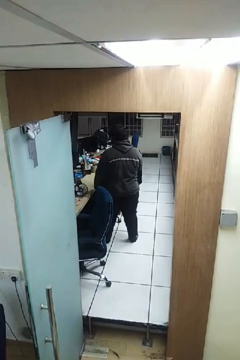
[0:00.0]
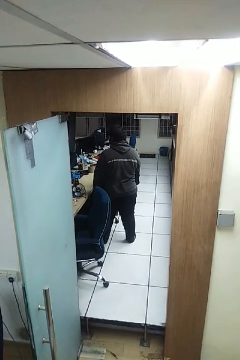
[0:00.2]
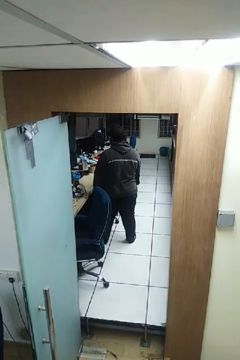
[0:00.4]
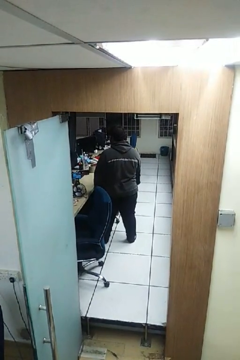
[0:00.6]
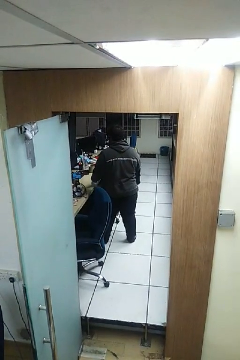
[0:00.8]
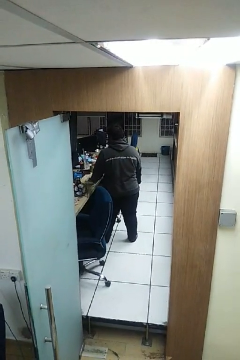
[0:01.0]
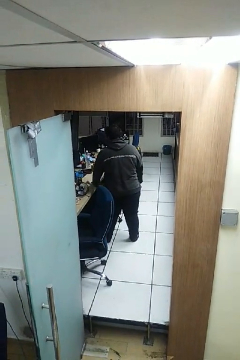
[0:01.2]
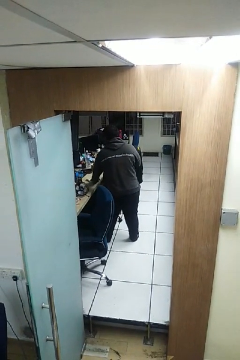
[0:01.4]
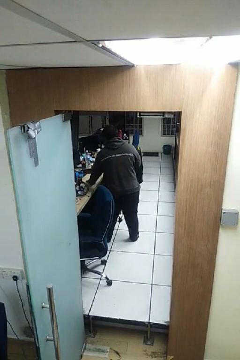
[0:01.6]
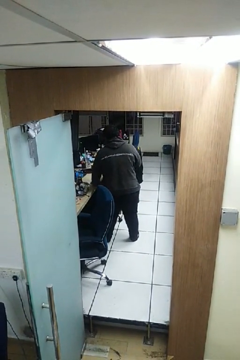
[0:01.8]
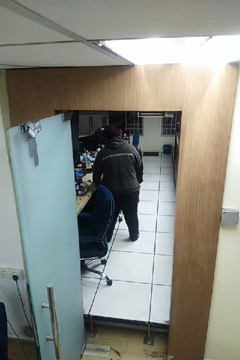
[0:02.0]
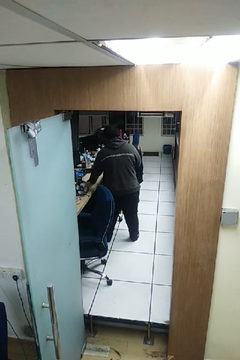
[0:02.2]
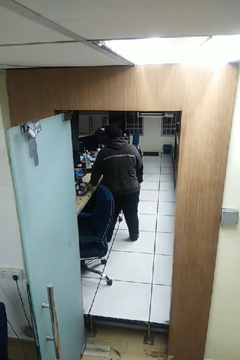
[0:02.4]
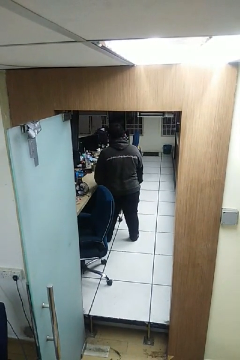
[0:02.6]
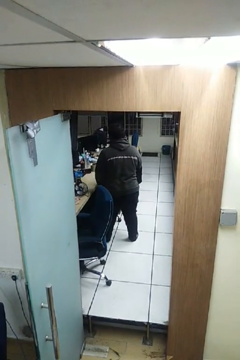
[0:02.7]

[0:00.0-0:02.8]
person cleans table with rag

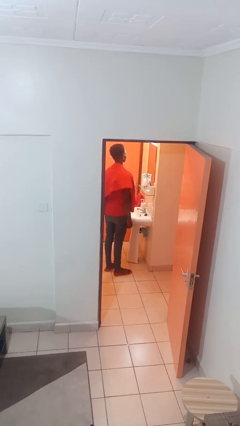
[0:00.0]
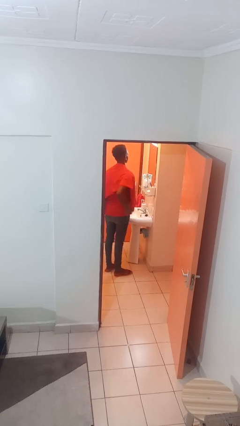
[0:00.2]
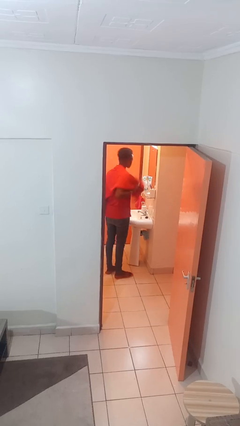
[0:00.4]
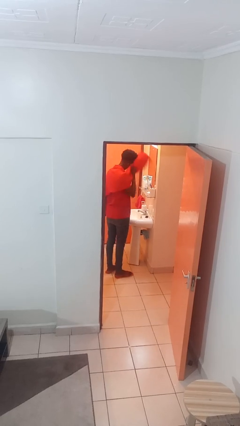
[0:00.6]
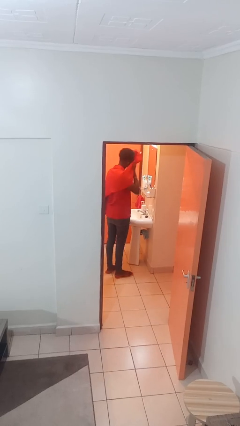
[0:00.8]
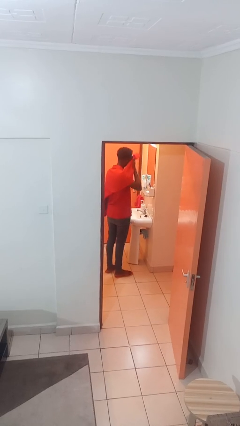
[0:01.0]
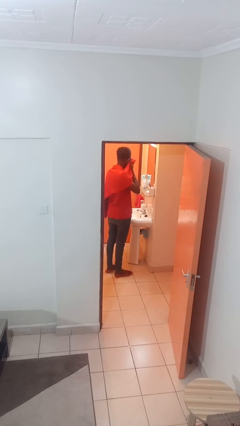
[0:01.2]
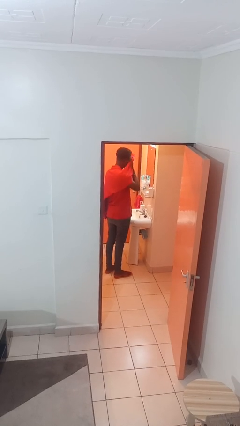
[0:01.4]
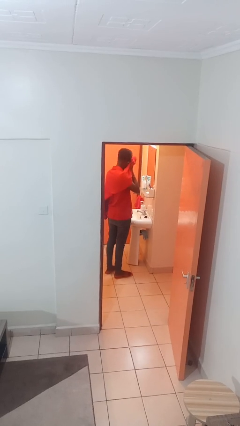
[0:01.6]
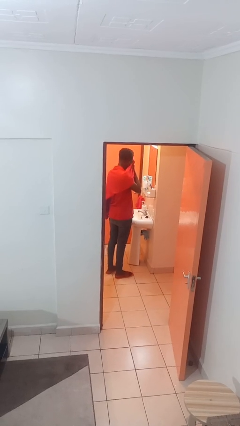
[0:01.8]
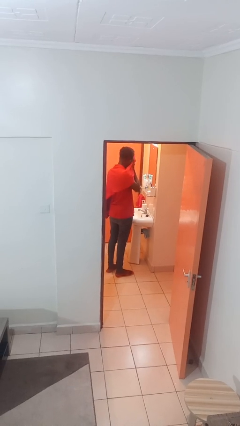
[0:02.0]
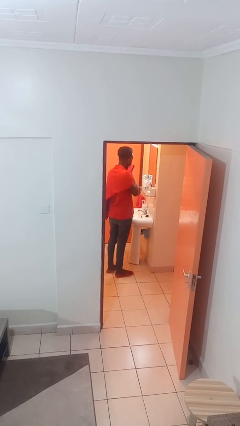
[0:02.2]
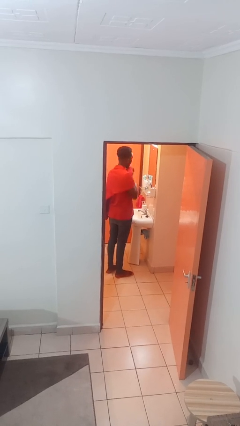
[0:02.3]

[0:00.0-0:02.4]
person dries face with towel

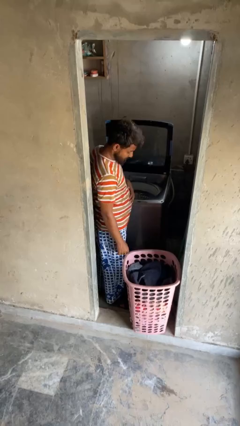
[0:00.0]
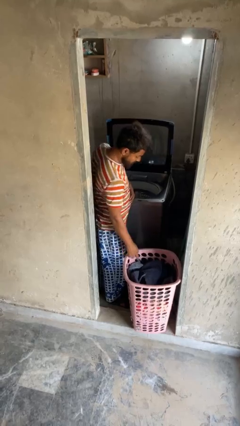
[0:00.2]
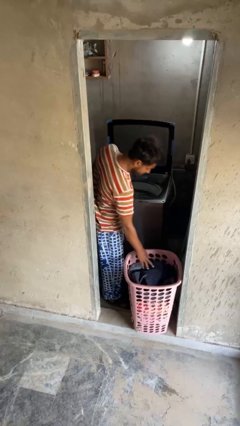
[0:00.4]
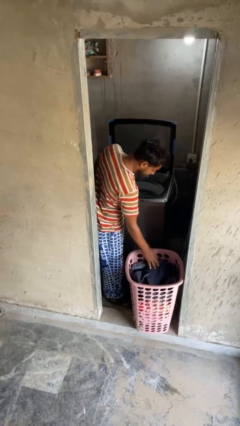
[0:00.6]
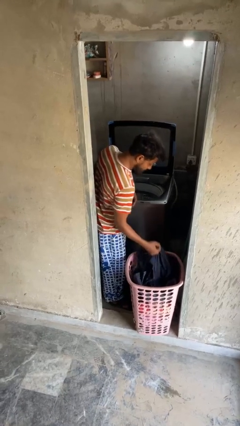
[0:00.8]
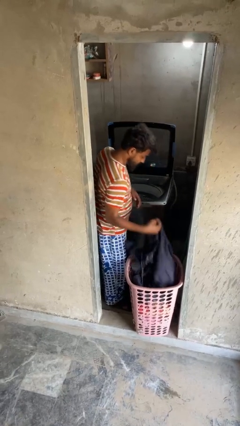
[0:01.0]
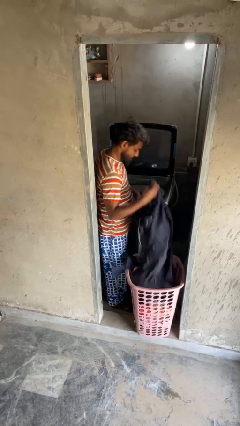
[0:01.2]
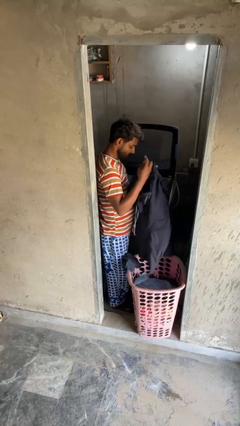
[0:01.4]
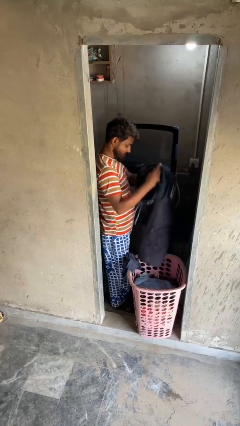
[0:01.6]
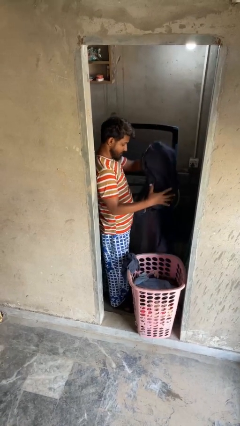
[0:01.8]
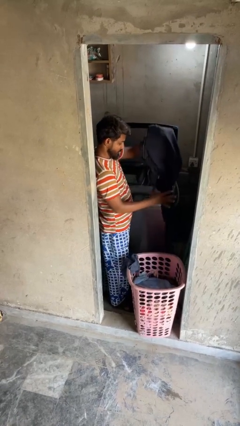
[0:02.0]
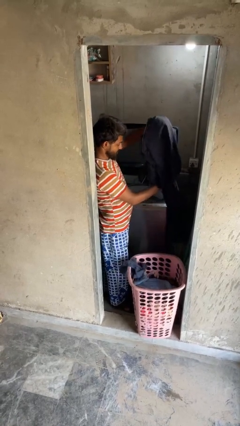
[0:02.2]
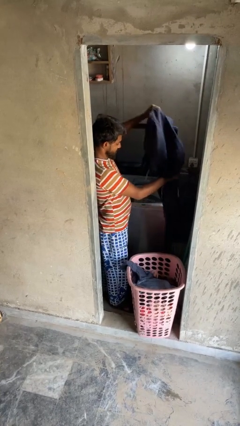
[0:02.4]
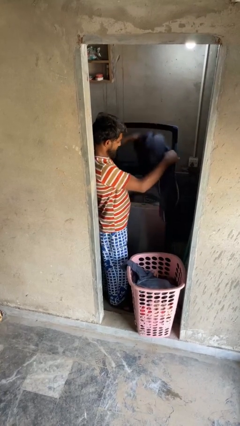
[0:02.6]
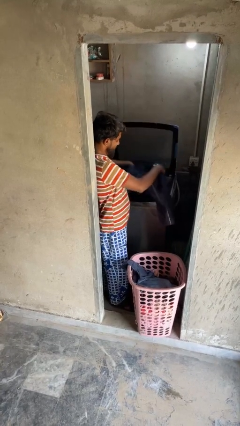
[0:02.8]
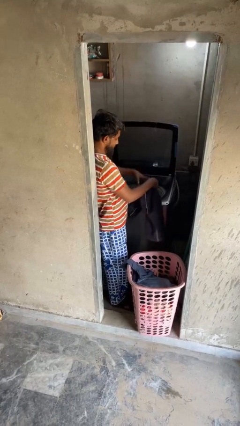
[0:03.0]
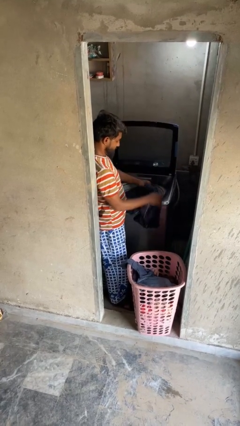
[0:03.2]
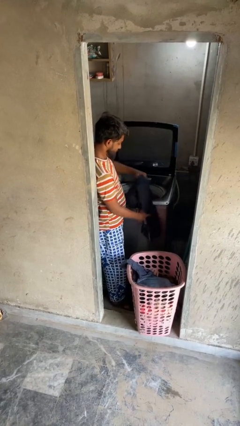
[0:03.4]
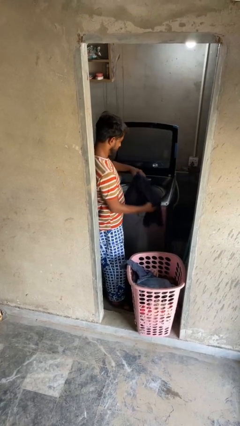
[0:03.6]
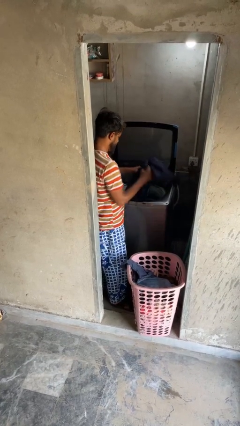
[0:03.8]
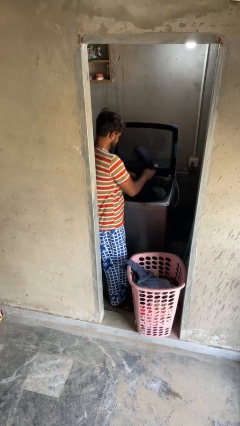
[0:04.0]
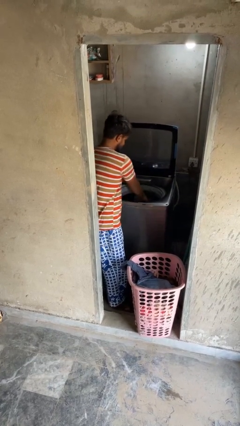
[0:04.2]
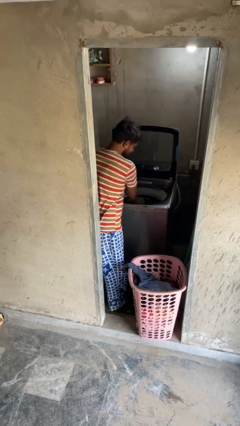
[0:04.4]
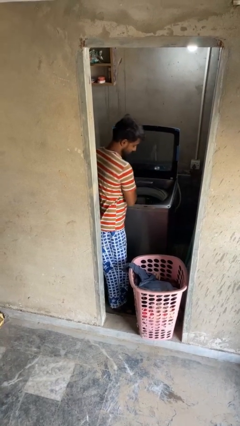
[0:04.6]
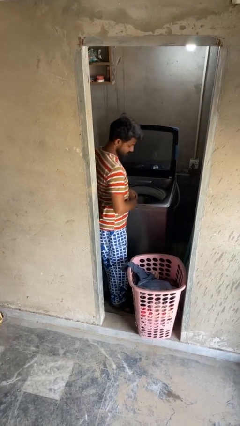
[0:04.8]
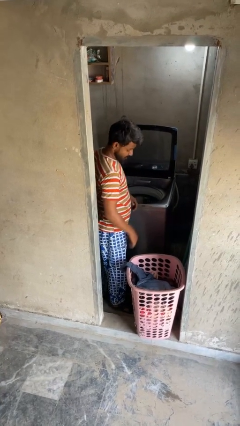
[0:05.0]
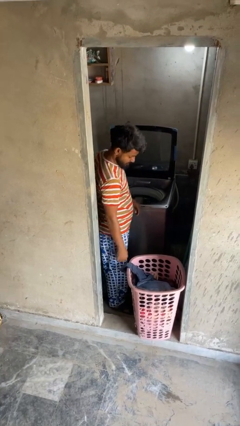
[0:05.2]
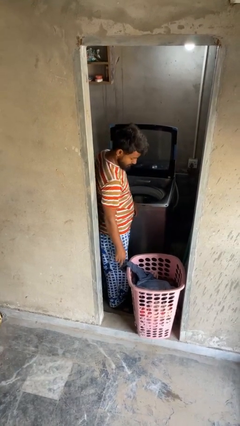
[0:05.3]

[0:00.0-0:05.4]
person loads dishwasher

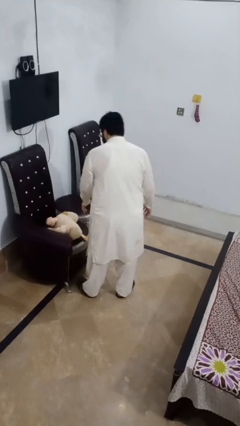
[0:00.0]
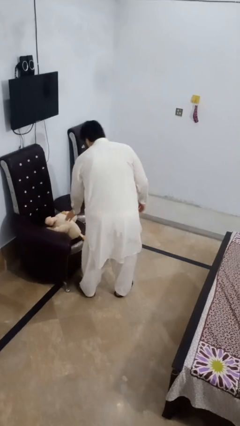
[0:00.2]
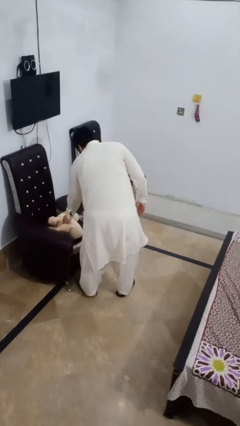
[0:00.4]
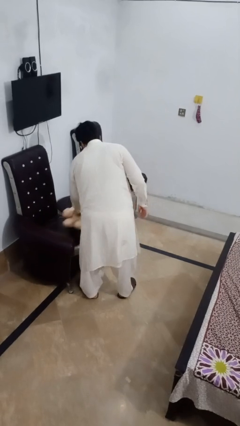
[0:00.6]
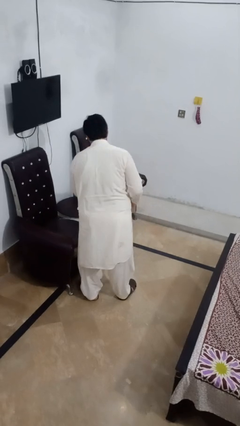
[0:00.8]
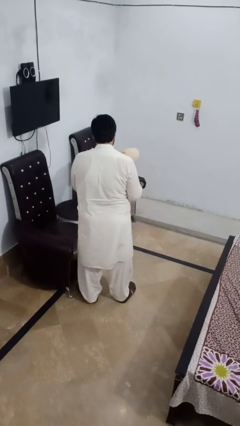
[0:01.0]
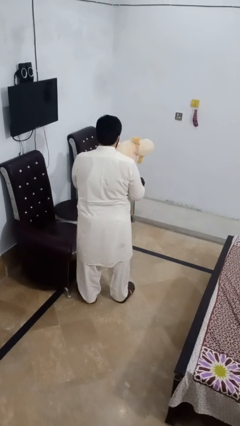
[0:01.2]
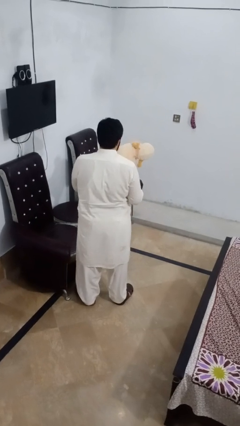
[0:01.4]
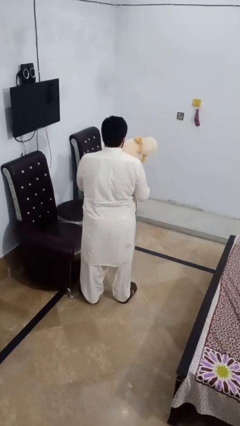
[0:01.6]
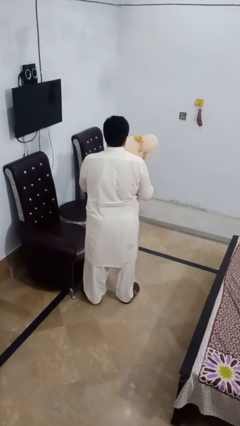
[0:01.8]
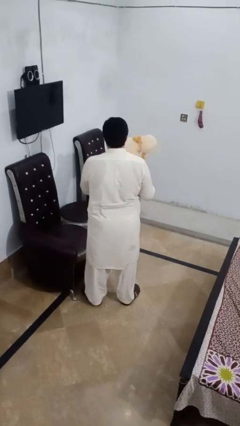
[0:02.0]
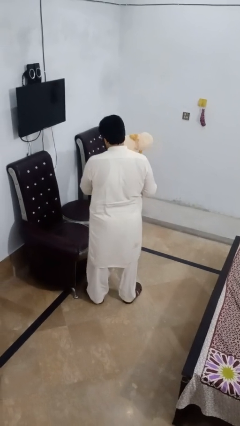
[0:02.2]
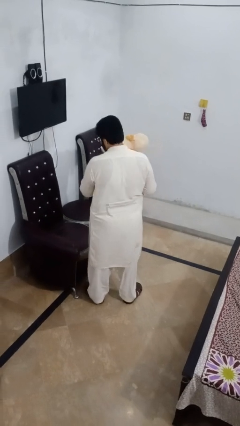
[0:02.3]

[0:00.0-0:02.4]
person picks up object from couch

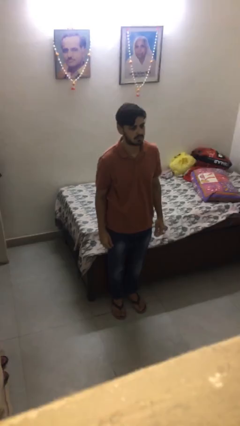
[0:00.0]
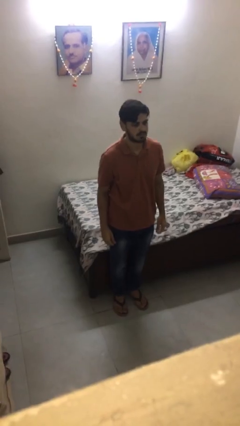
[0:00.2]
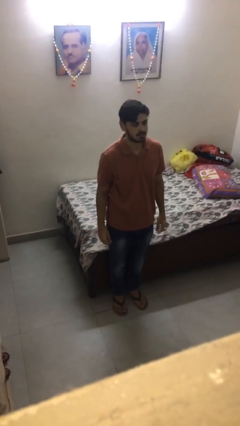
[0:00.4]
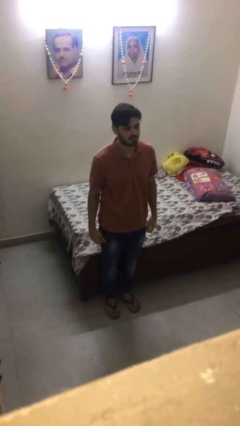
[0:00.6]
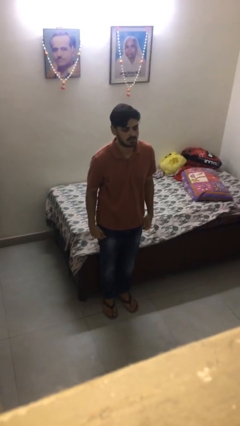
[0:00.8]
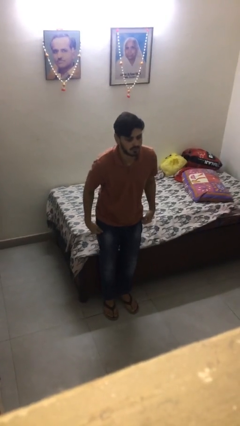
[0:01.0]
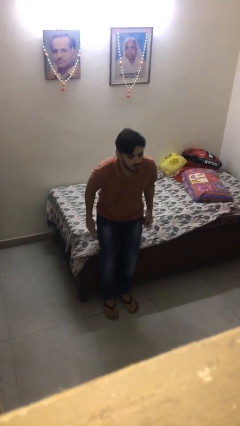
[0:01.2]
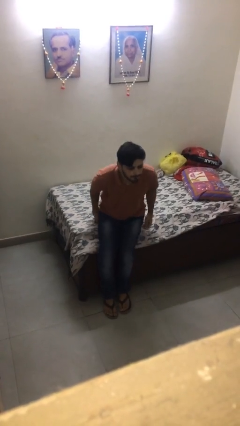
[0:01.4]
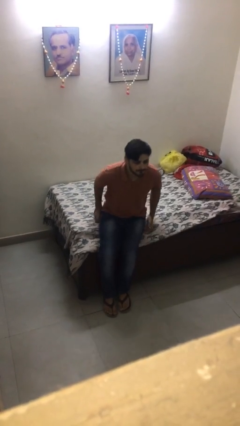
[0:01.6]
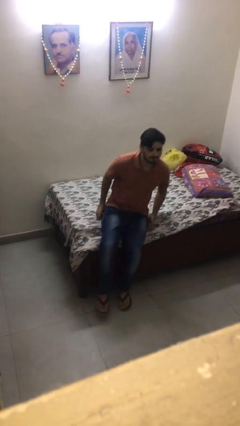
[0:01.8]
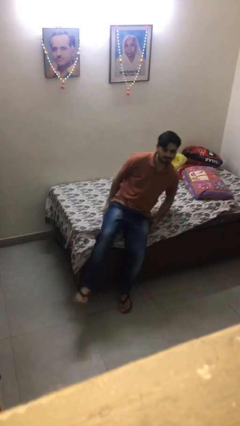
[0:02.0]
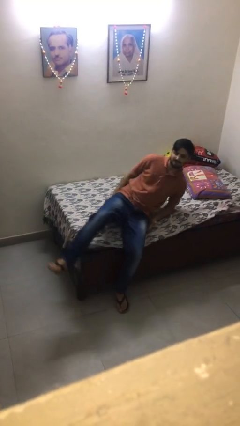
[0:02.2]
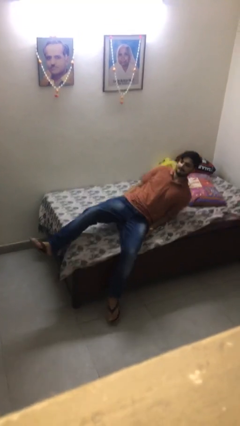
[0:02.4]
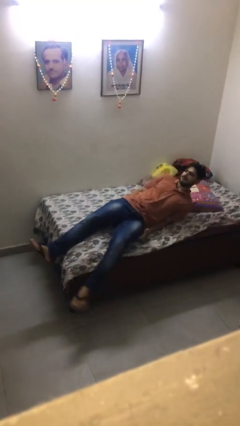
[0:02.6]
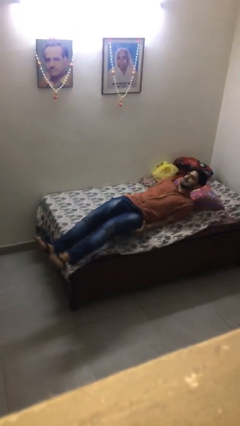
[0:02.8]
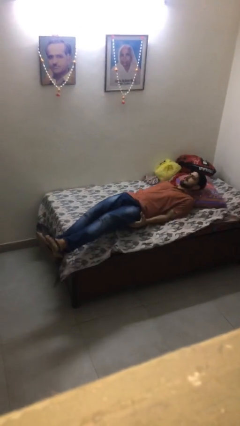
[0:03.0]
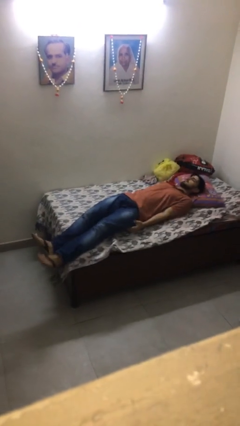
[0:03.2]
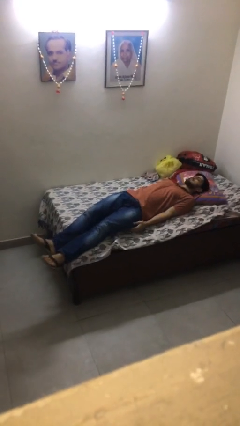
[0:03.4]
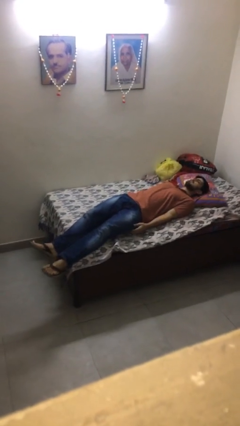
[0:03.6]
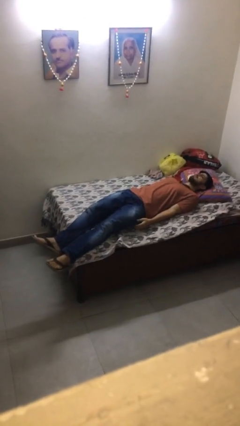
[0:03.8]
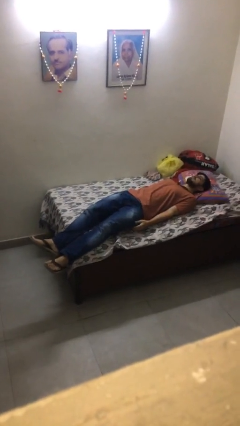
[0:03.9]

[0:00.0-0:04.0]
person lies down on bed

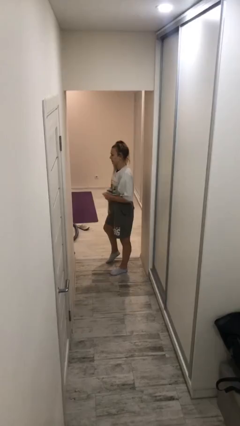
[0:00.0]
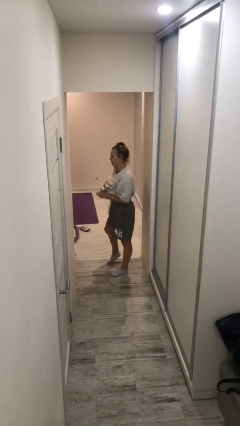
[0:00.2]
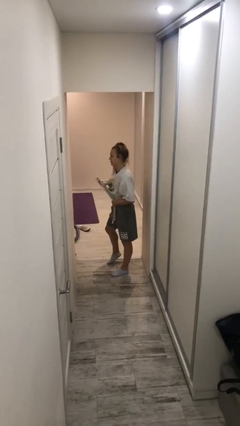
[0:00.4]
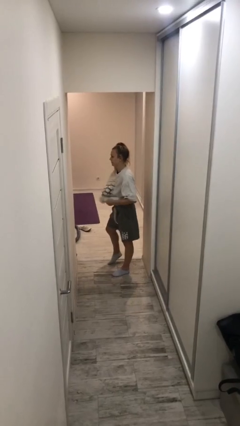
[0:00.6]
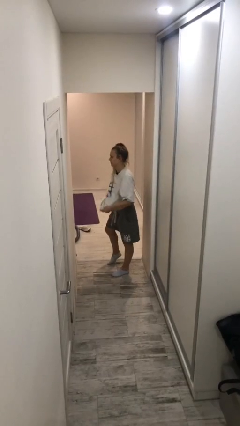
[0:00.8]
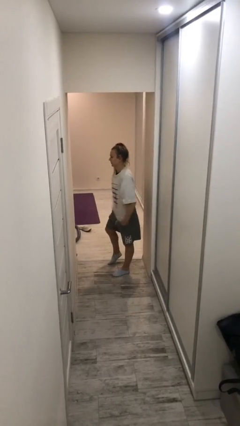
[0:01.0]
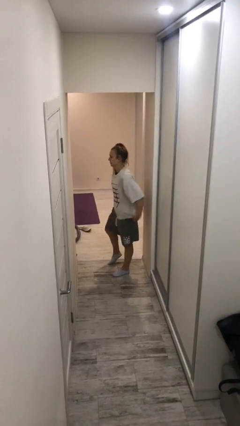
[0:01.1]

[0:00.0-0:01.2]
person untucks shirt
